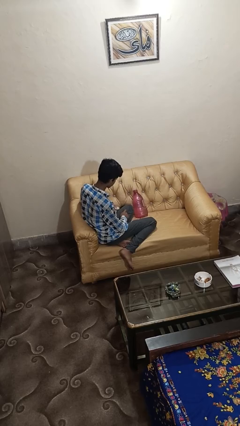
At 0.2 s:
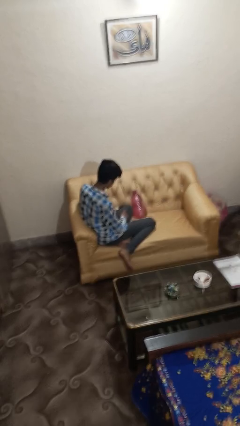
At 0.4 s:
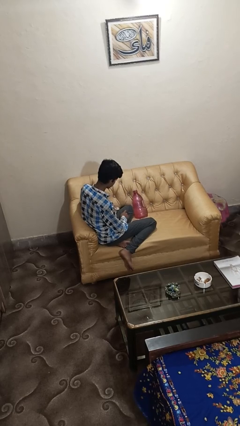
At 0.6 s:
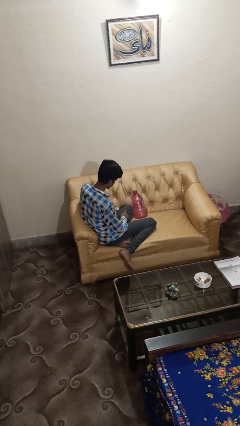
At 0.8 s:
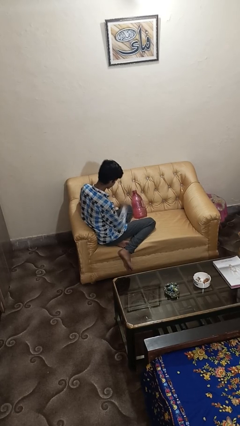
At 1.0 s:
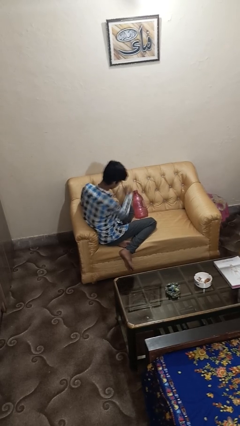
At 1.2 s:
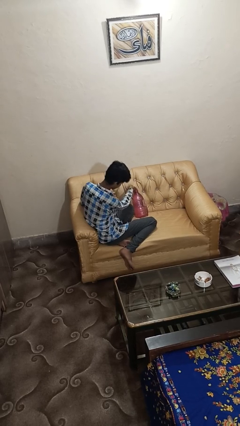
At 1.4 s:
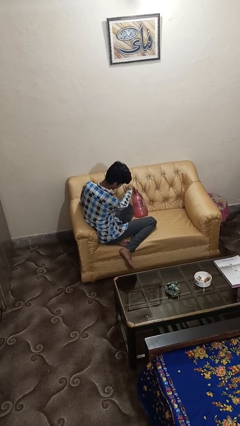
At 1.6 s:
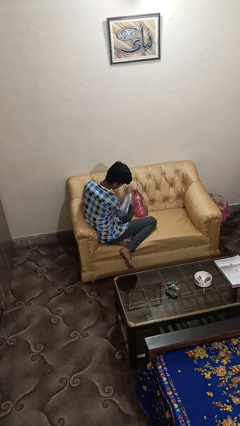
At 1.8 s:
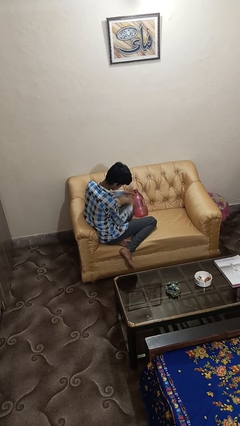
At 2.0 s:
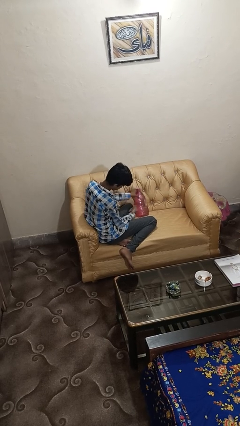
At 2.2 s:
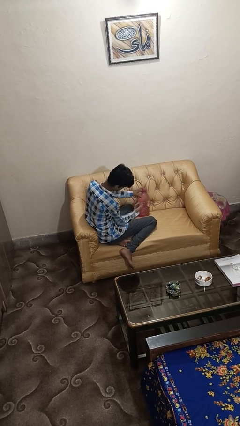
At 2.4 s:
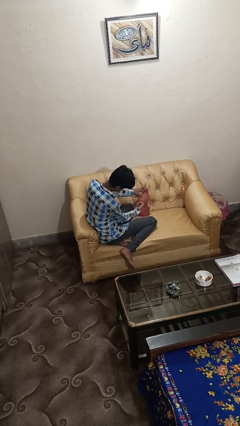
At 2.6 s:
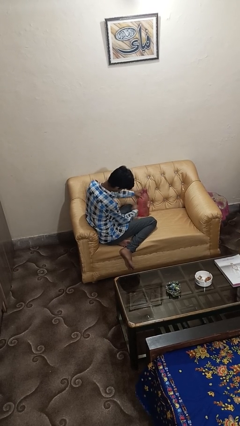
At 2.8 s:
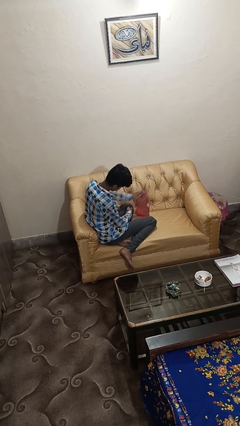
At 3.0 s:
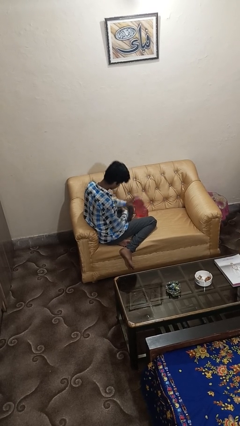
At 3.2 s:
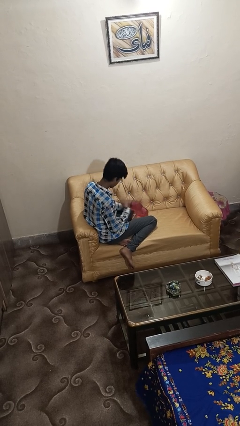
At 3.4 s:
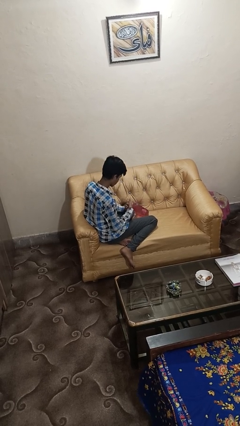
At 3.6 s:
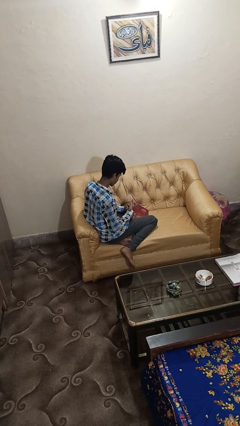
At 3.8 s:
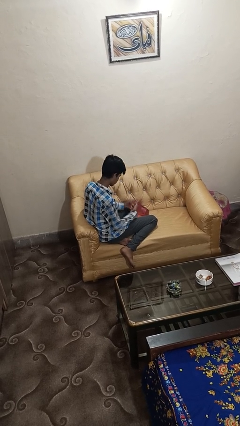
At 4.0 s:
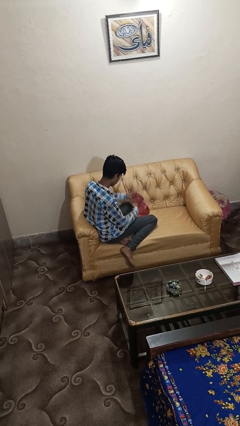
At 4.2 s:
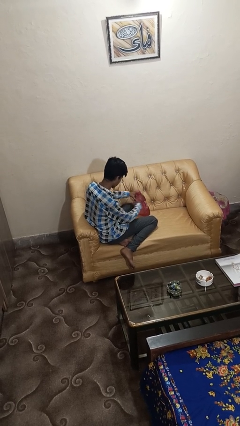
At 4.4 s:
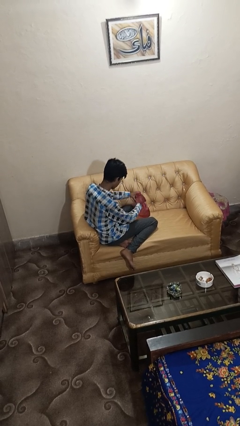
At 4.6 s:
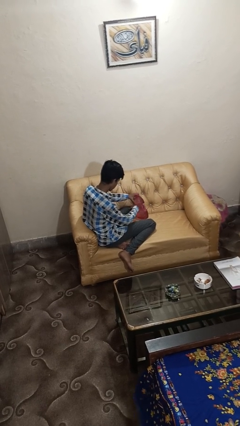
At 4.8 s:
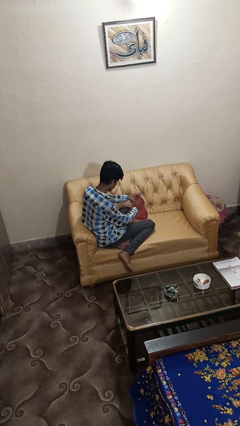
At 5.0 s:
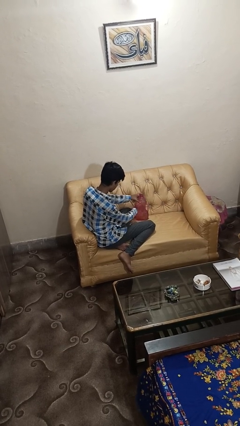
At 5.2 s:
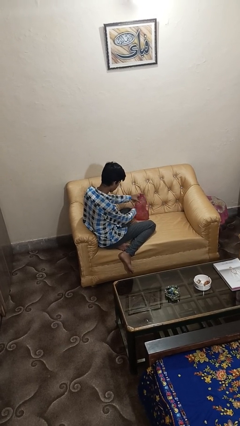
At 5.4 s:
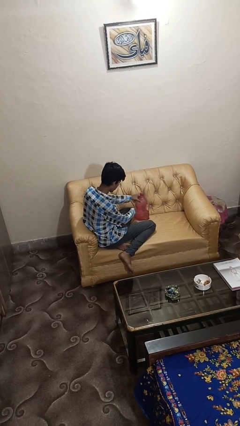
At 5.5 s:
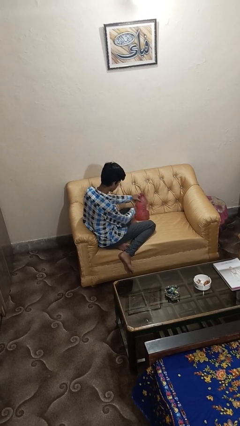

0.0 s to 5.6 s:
person taps object with finger

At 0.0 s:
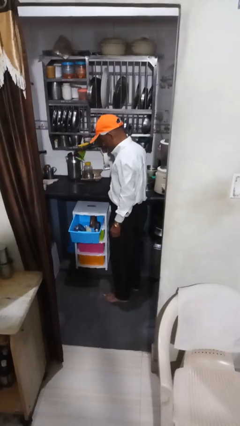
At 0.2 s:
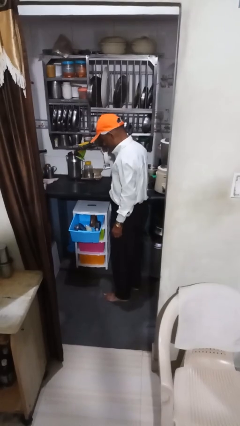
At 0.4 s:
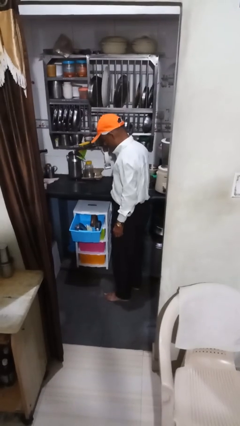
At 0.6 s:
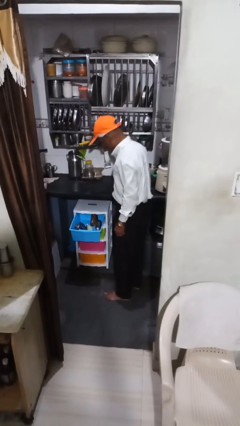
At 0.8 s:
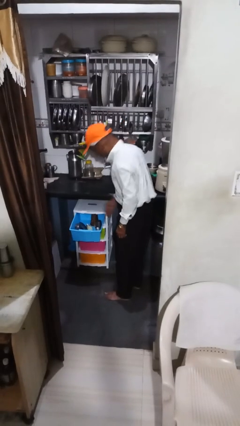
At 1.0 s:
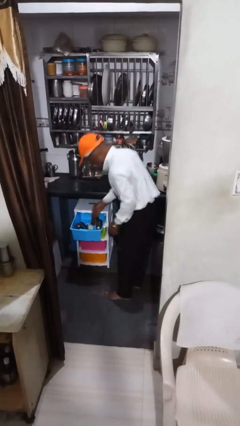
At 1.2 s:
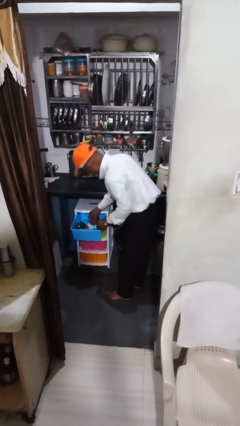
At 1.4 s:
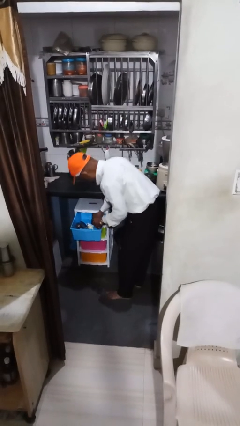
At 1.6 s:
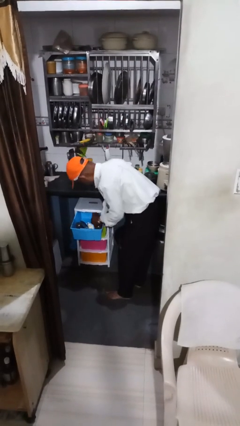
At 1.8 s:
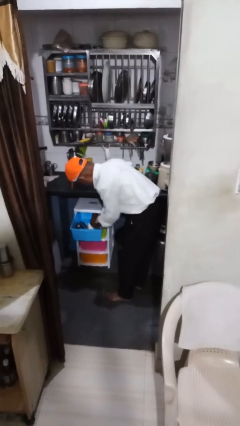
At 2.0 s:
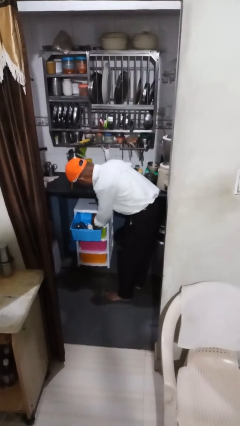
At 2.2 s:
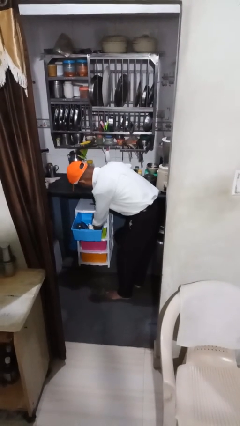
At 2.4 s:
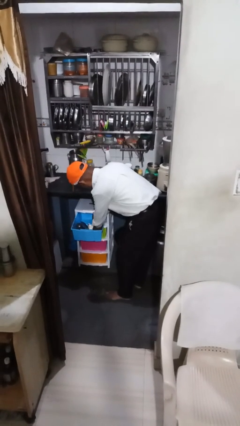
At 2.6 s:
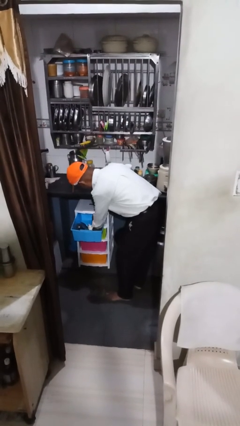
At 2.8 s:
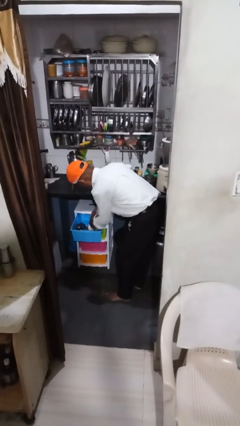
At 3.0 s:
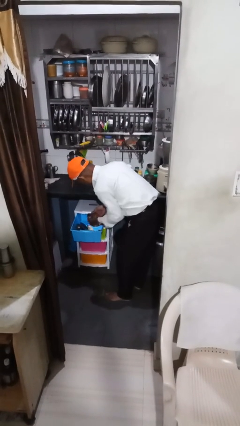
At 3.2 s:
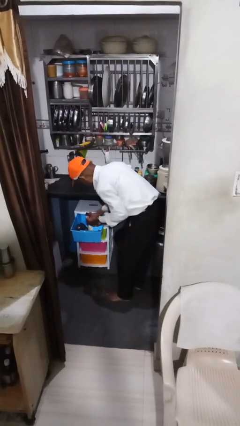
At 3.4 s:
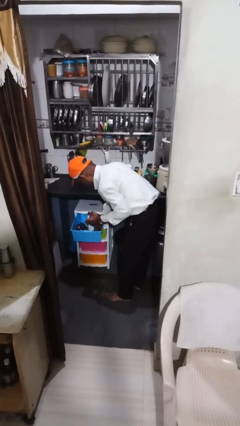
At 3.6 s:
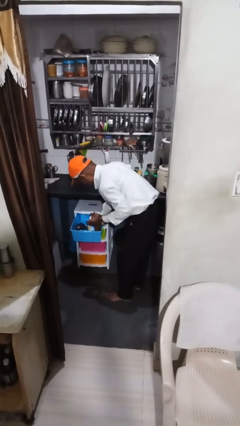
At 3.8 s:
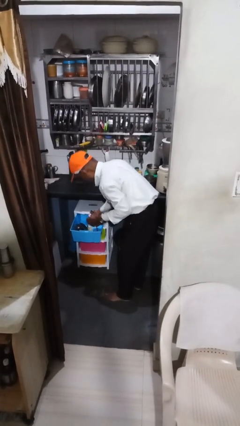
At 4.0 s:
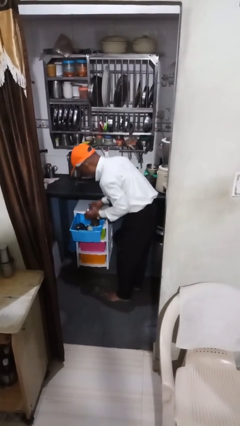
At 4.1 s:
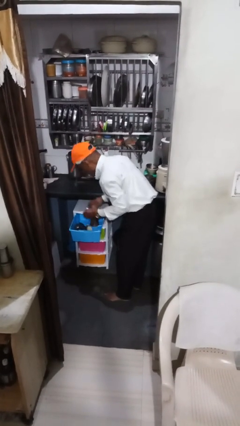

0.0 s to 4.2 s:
person takes object from kitchen drawer

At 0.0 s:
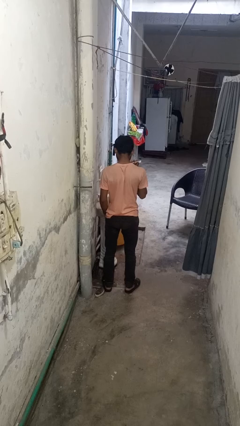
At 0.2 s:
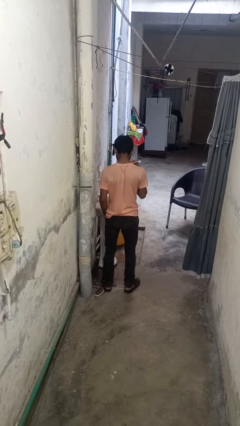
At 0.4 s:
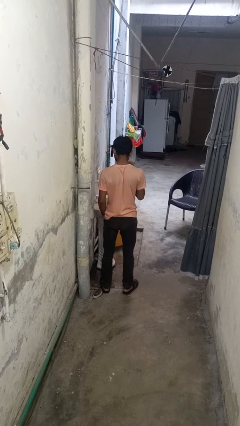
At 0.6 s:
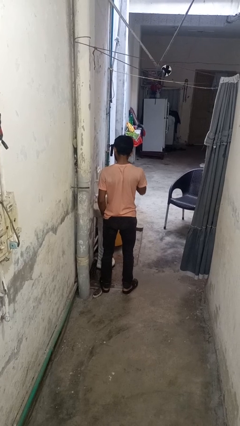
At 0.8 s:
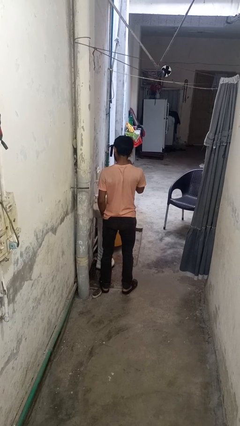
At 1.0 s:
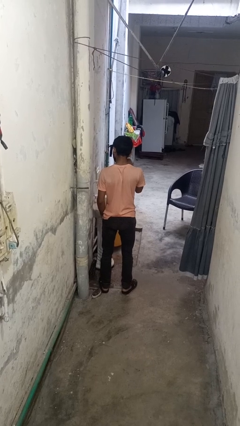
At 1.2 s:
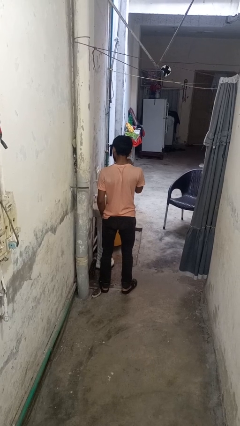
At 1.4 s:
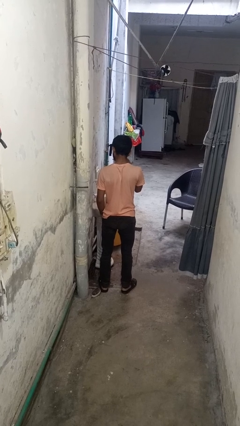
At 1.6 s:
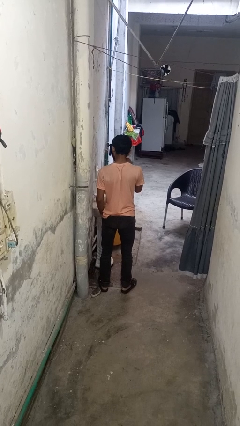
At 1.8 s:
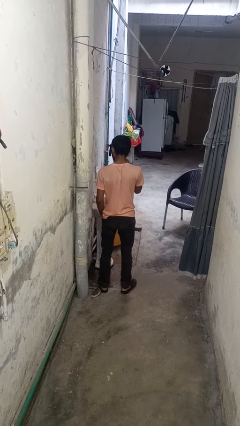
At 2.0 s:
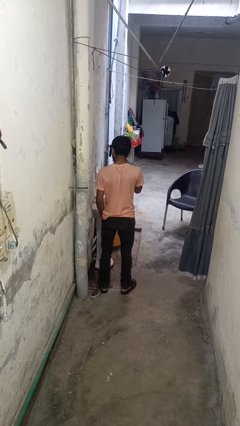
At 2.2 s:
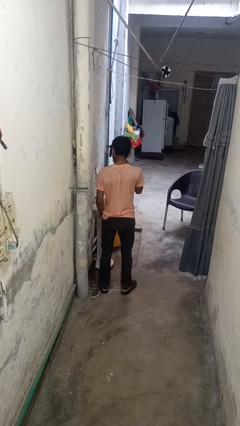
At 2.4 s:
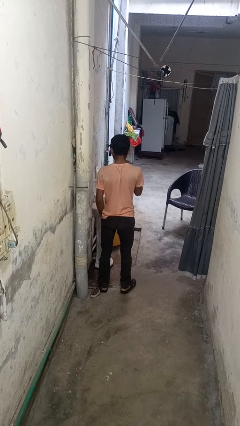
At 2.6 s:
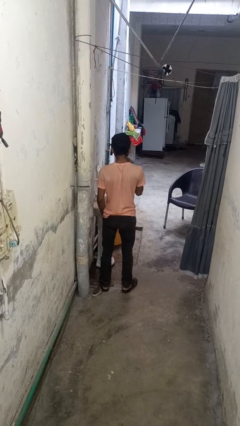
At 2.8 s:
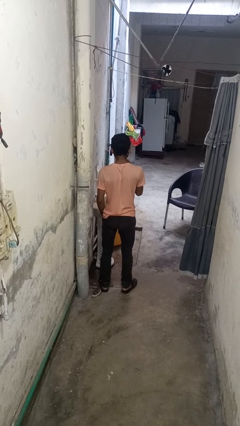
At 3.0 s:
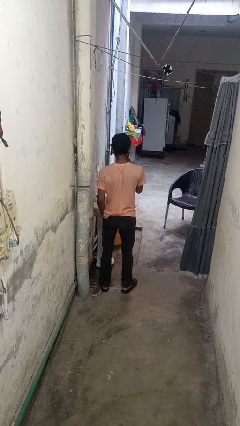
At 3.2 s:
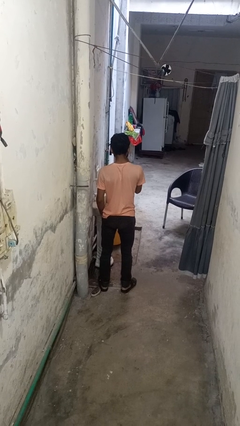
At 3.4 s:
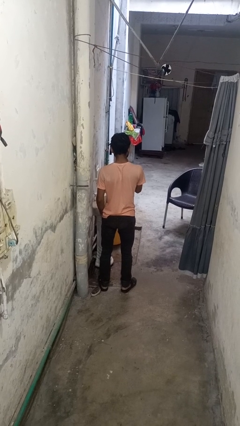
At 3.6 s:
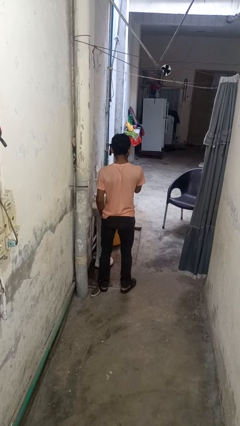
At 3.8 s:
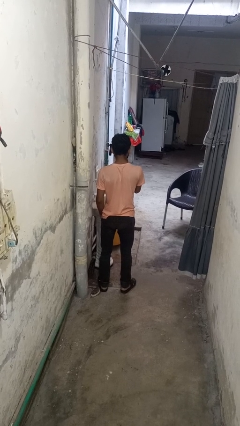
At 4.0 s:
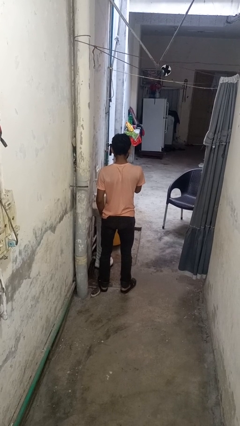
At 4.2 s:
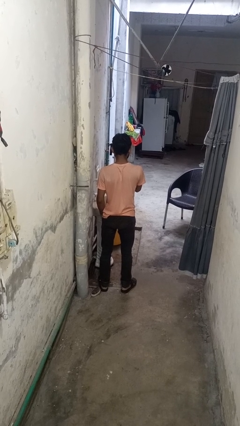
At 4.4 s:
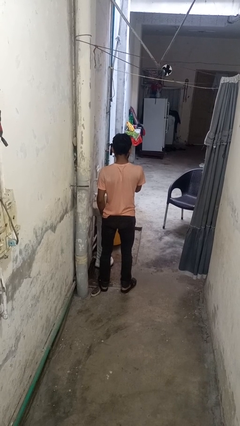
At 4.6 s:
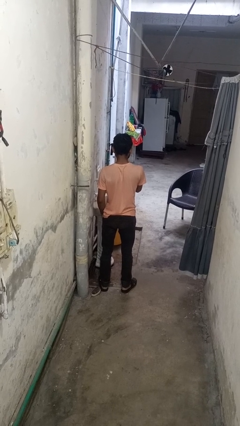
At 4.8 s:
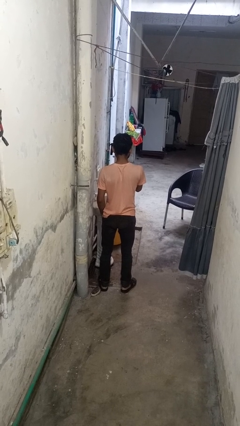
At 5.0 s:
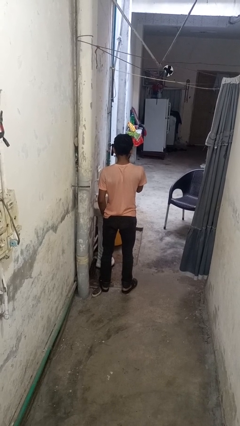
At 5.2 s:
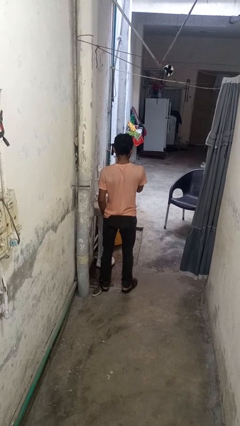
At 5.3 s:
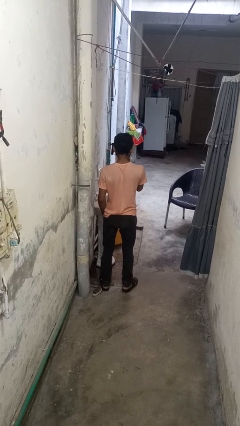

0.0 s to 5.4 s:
person brushes teeth

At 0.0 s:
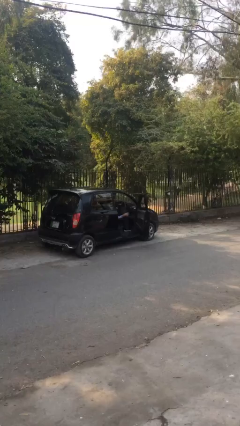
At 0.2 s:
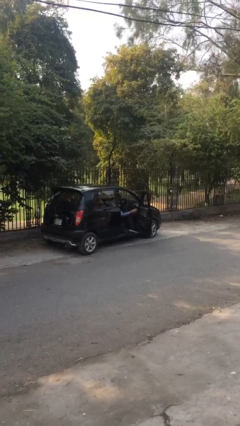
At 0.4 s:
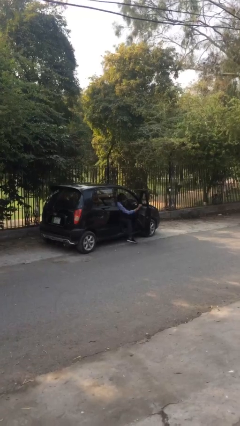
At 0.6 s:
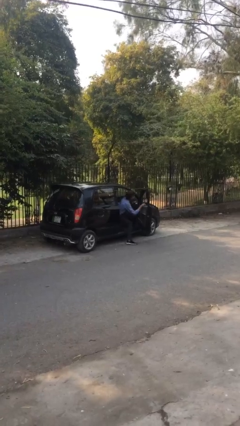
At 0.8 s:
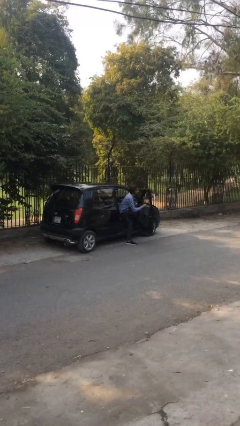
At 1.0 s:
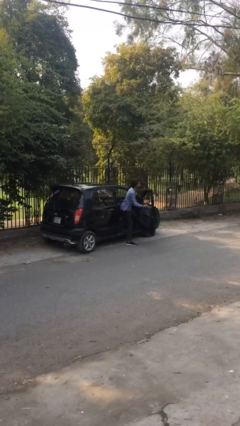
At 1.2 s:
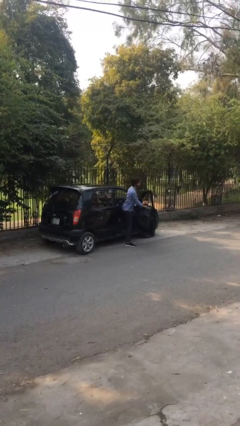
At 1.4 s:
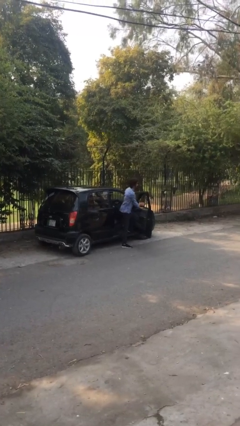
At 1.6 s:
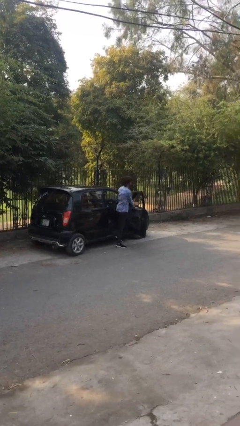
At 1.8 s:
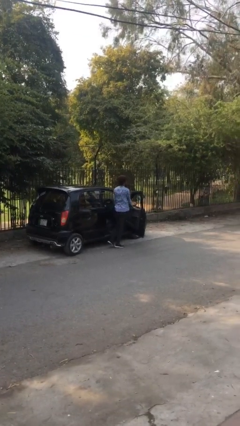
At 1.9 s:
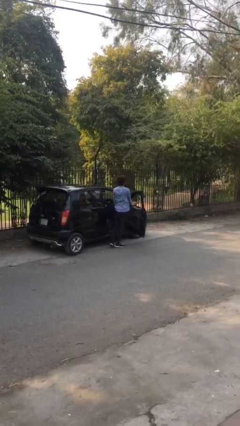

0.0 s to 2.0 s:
person exits car

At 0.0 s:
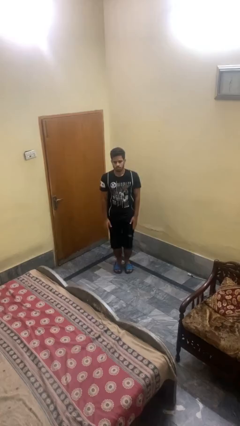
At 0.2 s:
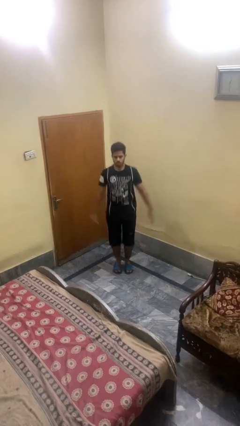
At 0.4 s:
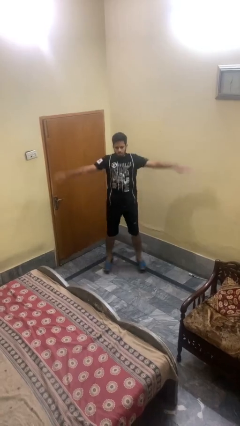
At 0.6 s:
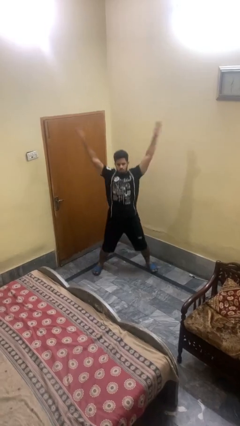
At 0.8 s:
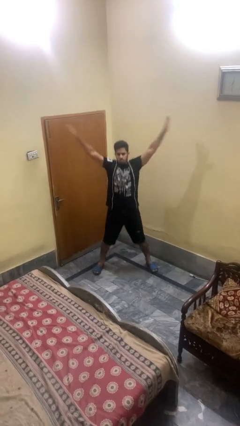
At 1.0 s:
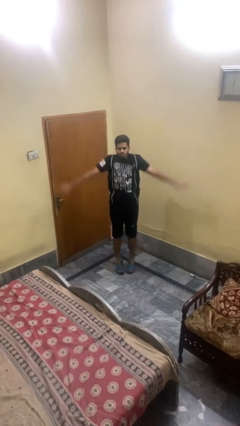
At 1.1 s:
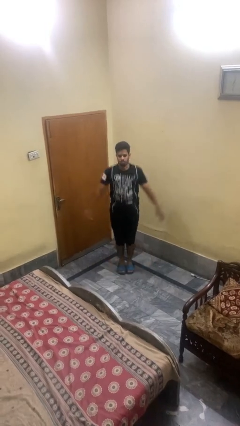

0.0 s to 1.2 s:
person exercises with jumping jacks
